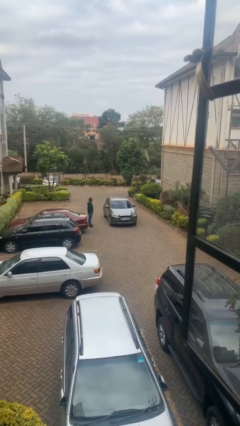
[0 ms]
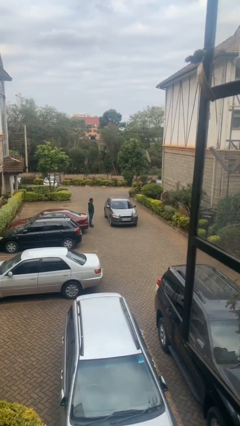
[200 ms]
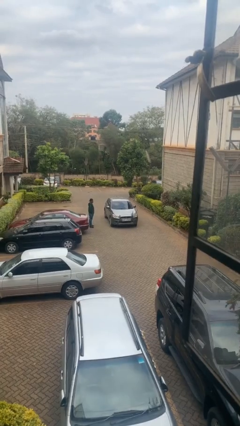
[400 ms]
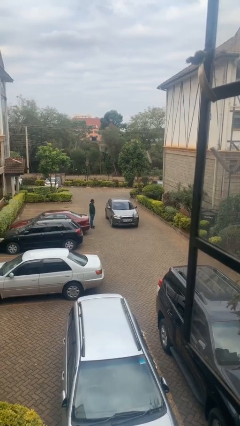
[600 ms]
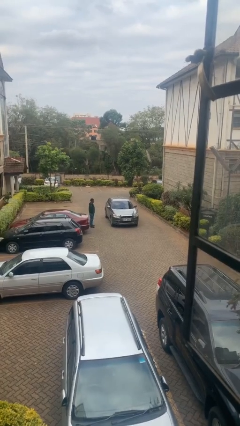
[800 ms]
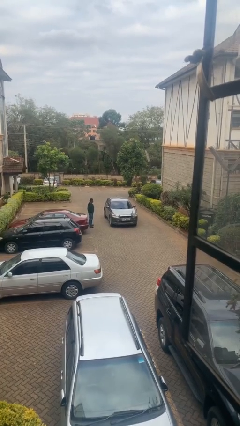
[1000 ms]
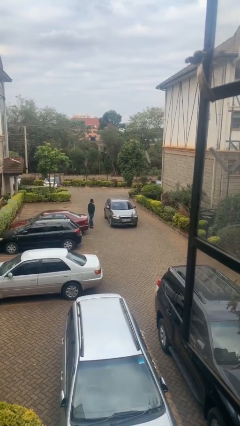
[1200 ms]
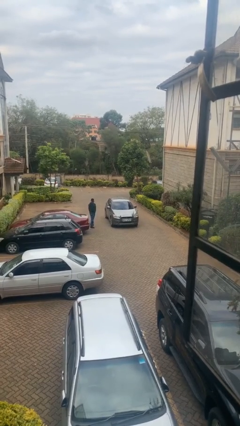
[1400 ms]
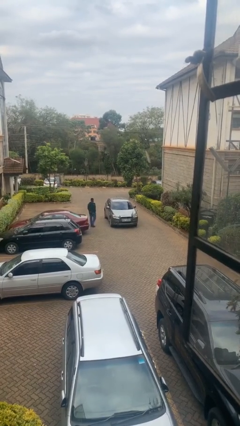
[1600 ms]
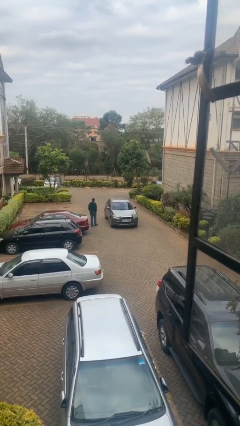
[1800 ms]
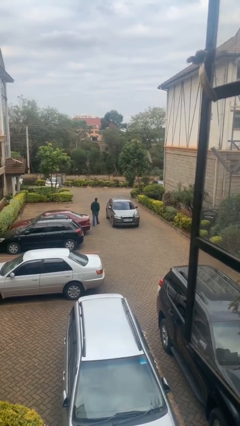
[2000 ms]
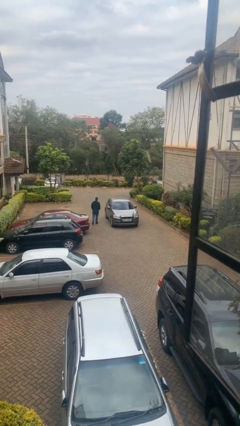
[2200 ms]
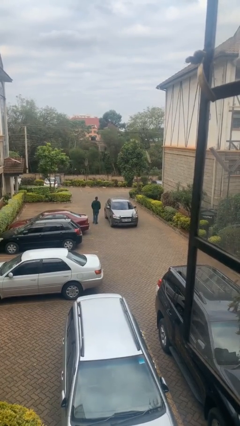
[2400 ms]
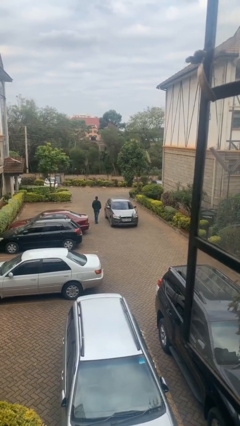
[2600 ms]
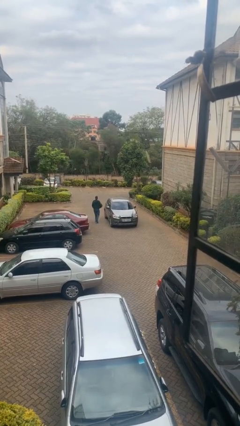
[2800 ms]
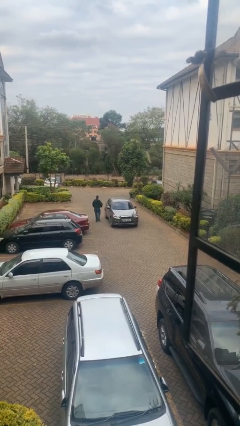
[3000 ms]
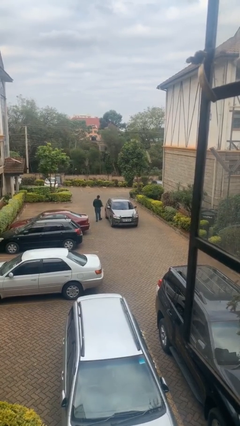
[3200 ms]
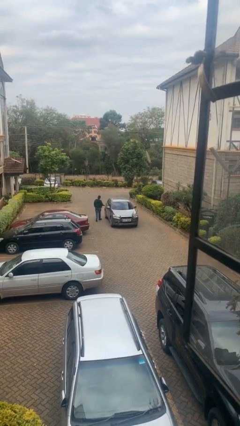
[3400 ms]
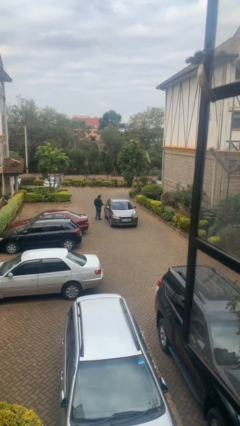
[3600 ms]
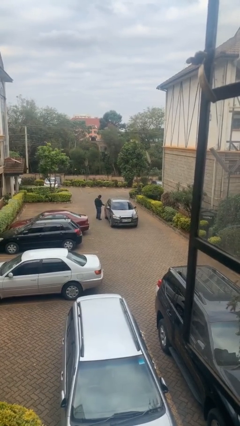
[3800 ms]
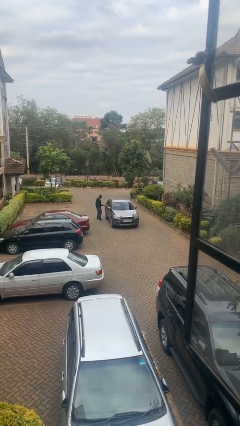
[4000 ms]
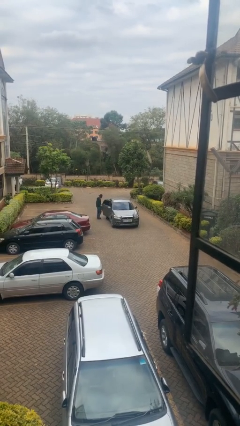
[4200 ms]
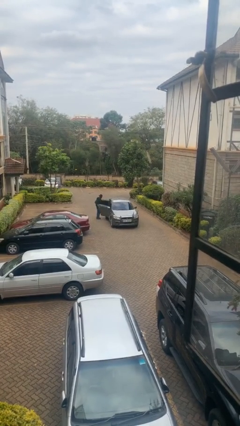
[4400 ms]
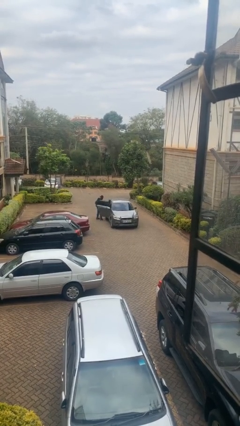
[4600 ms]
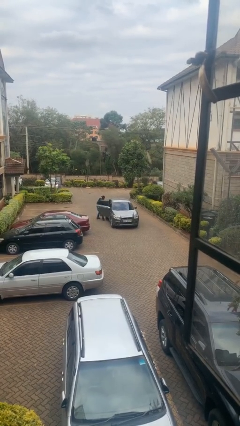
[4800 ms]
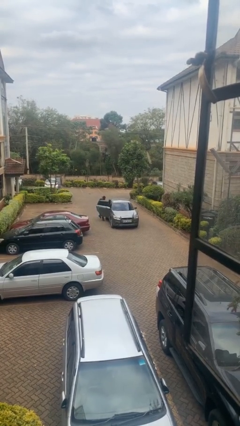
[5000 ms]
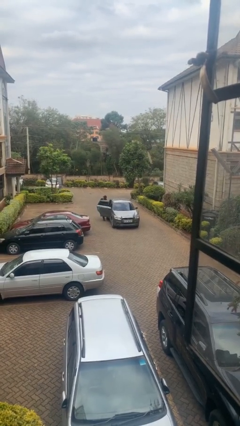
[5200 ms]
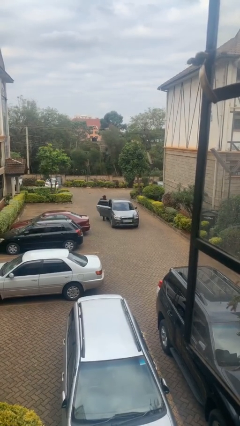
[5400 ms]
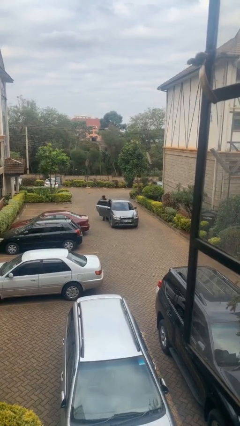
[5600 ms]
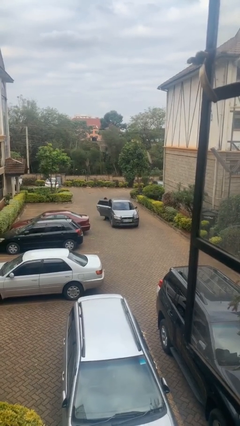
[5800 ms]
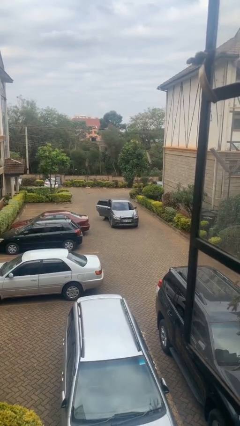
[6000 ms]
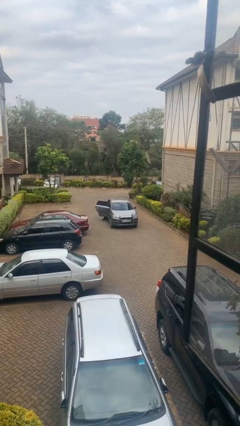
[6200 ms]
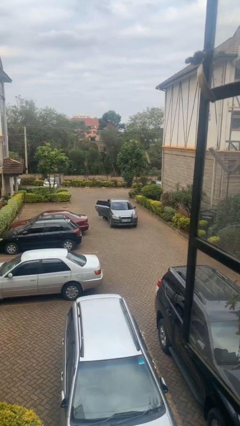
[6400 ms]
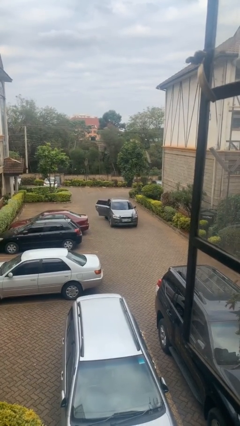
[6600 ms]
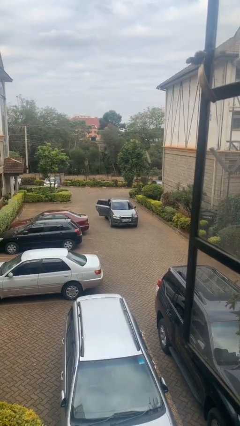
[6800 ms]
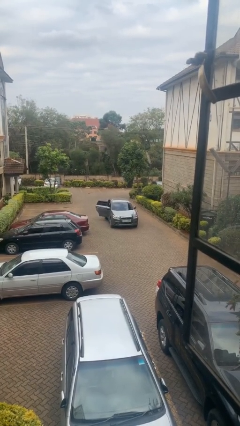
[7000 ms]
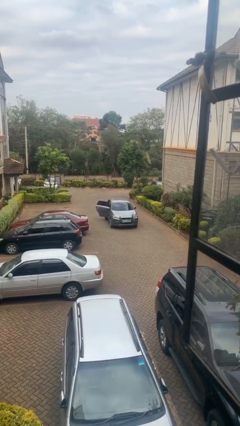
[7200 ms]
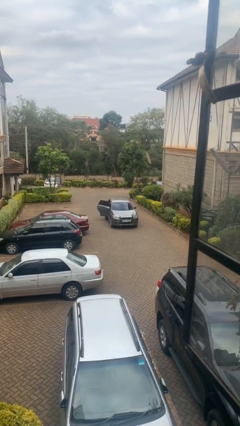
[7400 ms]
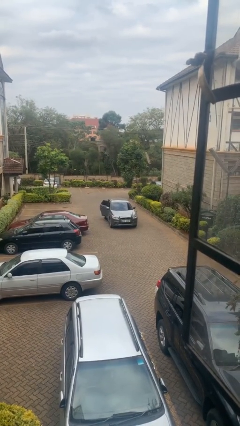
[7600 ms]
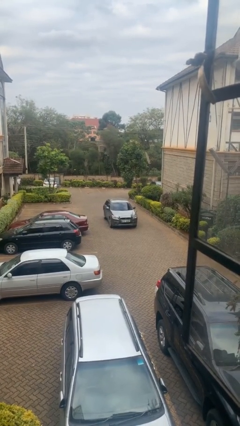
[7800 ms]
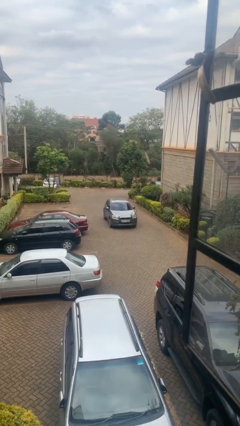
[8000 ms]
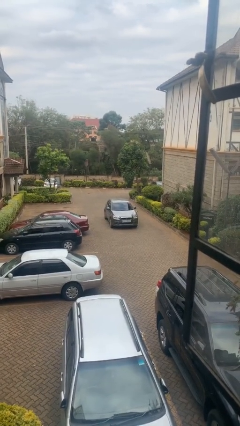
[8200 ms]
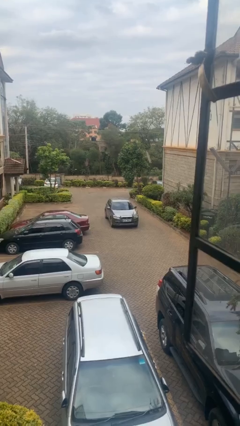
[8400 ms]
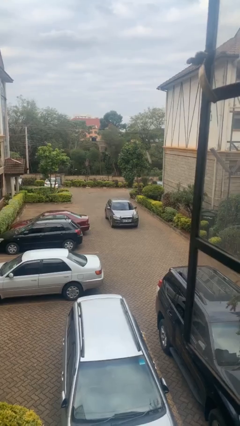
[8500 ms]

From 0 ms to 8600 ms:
car picks up person

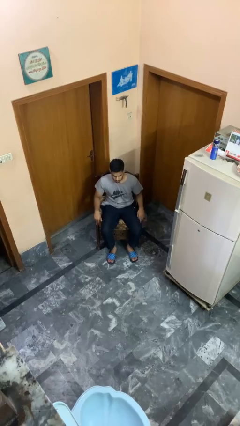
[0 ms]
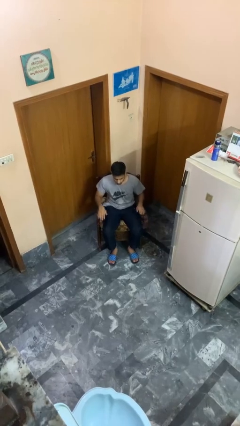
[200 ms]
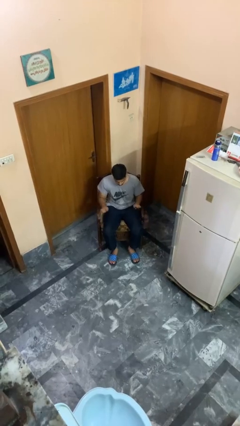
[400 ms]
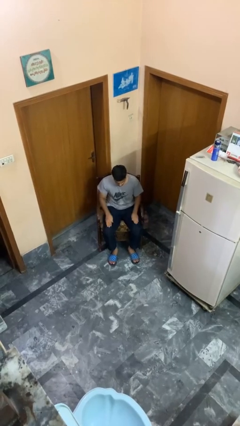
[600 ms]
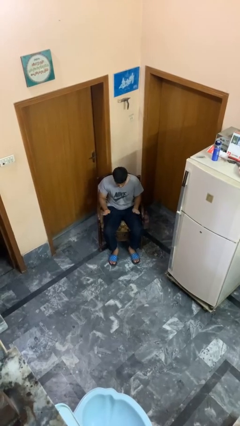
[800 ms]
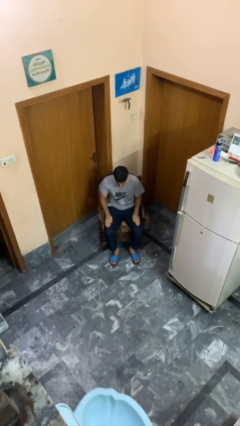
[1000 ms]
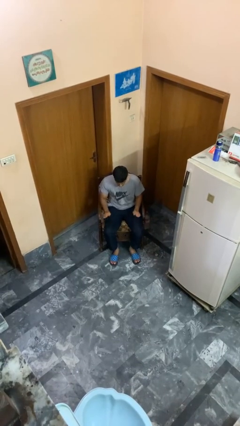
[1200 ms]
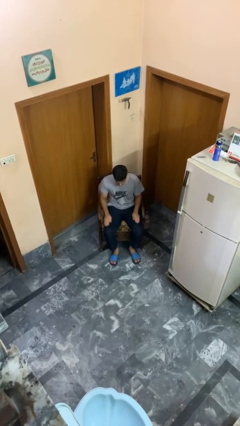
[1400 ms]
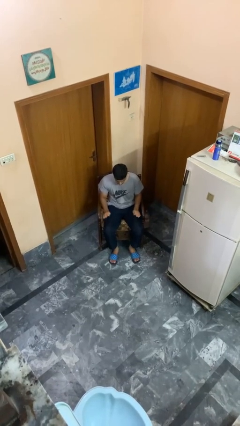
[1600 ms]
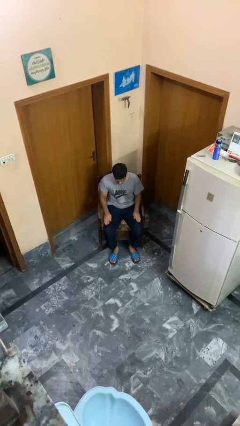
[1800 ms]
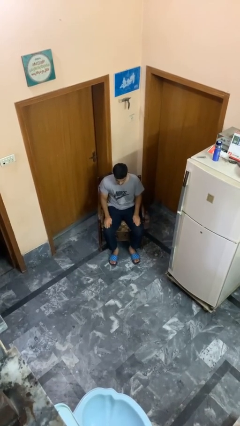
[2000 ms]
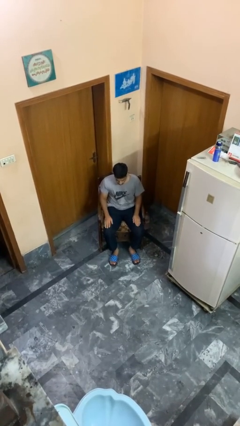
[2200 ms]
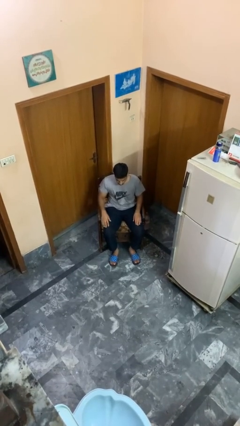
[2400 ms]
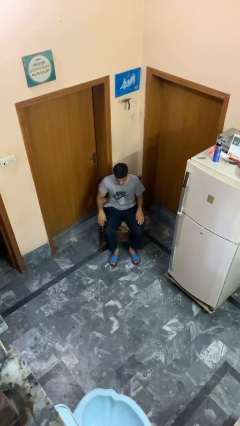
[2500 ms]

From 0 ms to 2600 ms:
person slaps hands on thighs

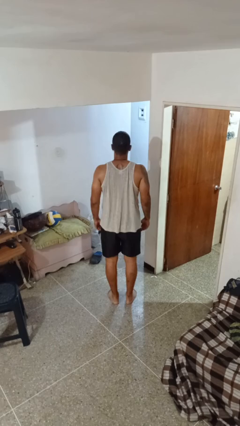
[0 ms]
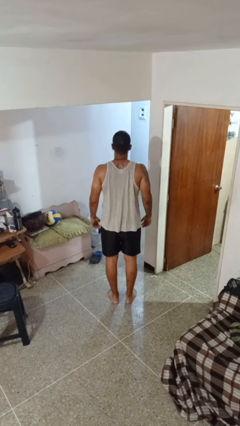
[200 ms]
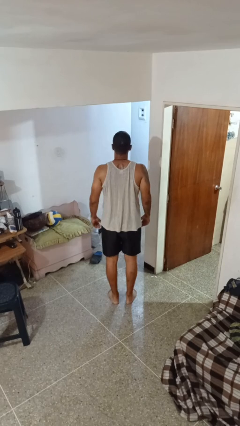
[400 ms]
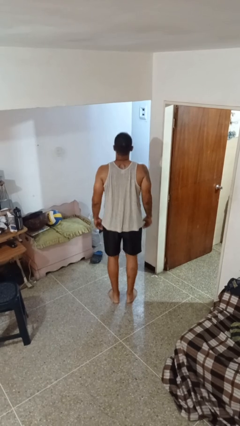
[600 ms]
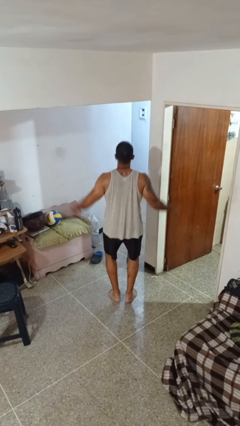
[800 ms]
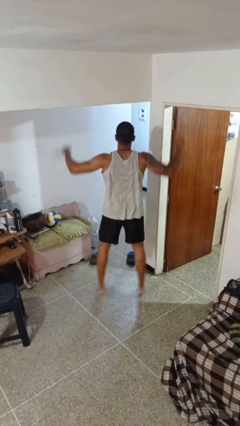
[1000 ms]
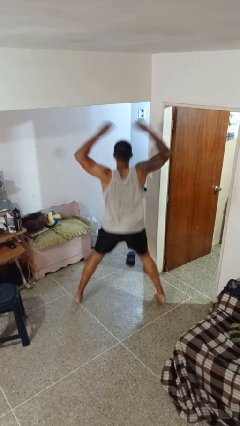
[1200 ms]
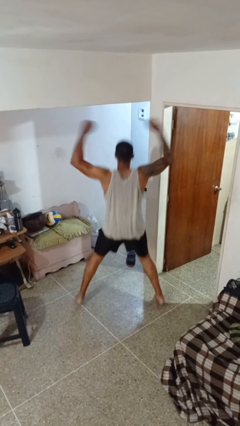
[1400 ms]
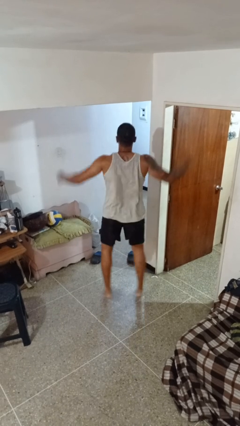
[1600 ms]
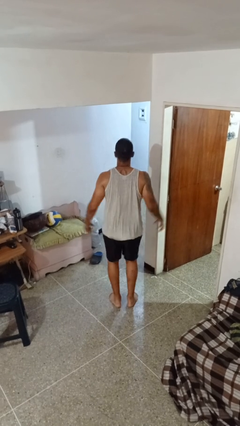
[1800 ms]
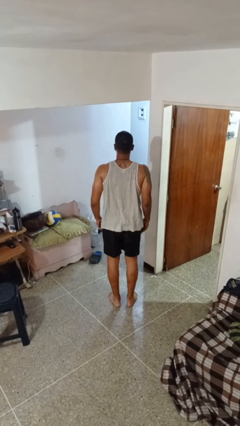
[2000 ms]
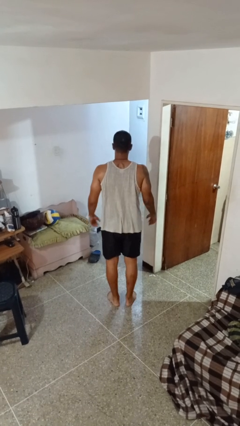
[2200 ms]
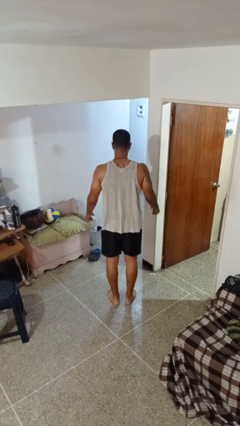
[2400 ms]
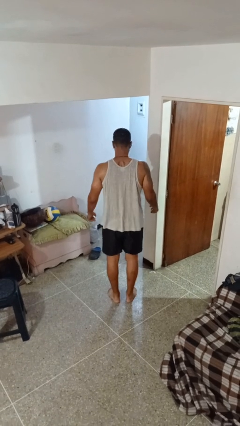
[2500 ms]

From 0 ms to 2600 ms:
person exercises with jumping jacks

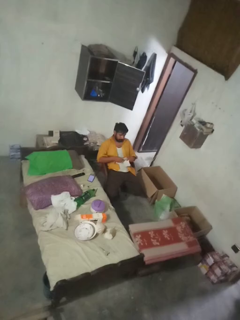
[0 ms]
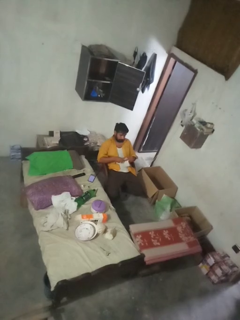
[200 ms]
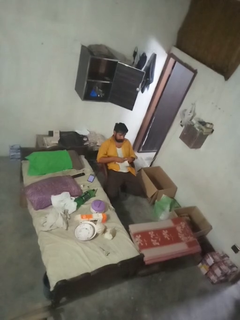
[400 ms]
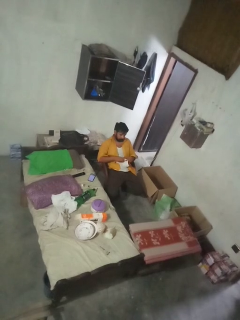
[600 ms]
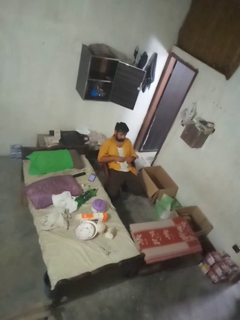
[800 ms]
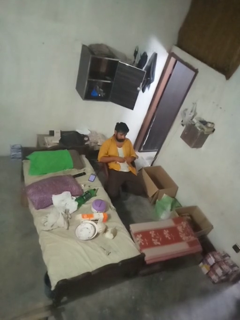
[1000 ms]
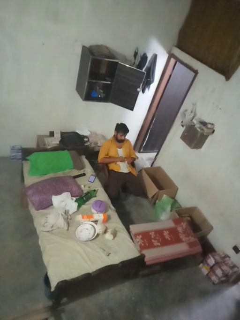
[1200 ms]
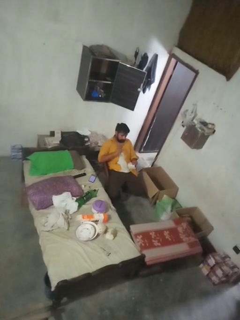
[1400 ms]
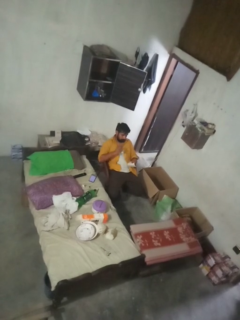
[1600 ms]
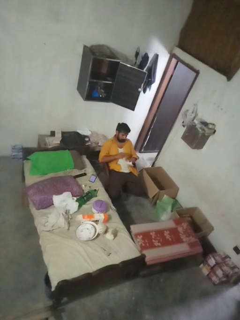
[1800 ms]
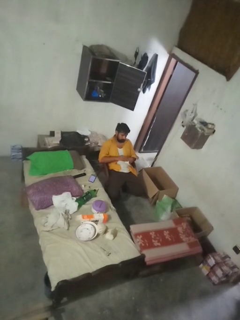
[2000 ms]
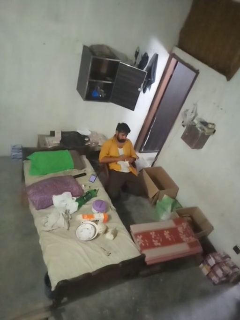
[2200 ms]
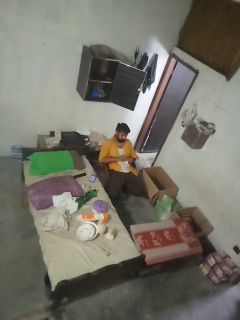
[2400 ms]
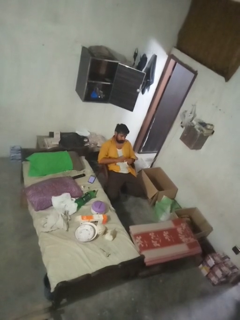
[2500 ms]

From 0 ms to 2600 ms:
person tears paper

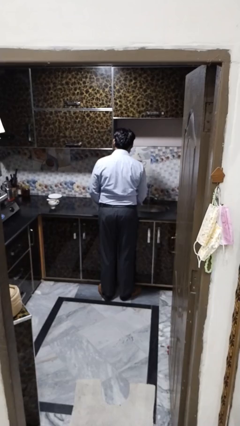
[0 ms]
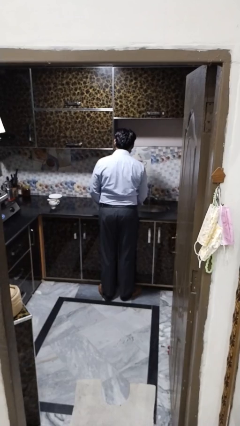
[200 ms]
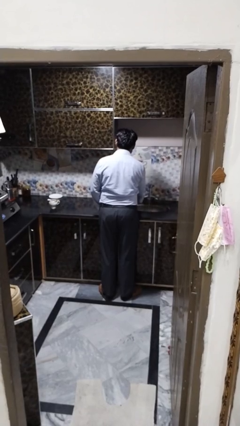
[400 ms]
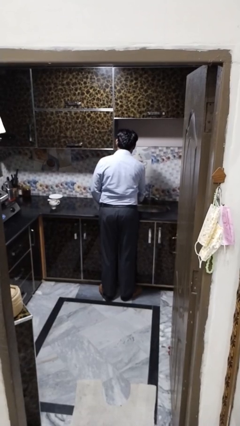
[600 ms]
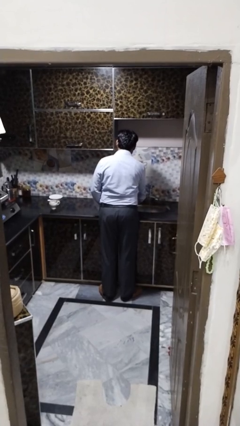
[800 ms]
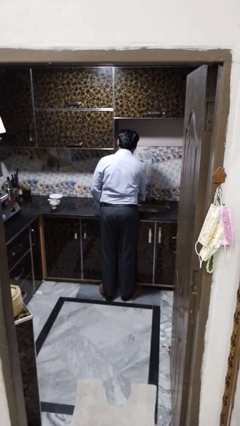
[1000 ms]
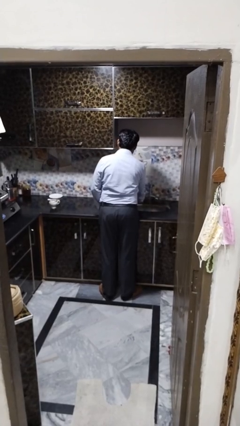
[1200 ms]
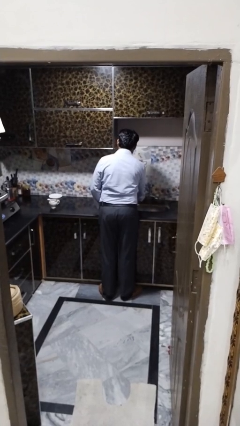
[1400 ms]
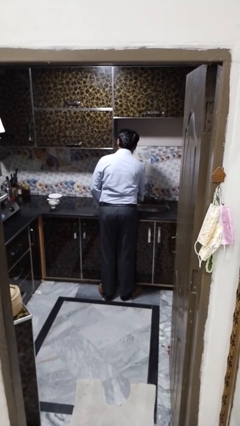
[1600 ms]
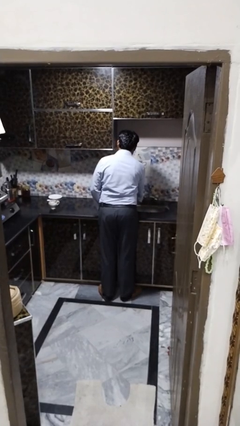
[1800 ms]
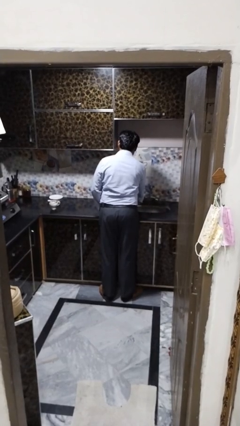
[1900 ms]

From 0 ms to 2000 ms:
person turns off faucet
